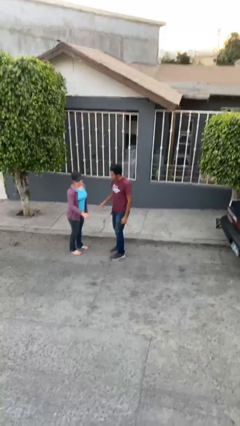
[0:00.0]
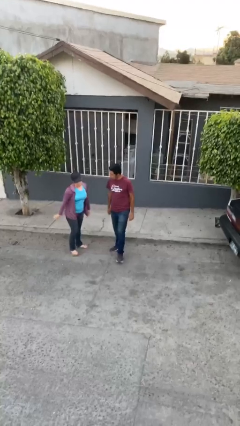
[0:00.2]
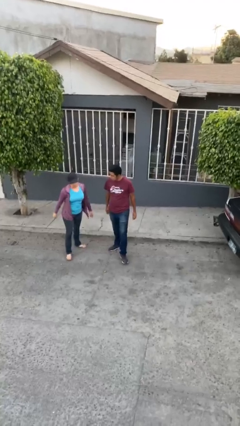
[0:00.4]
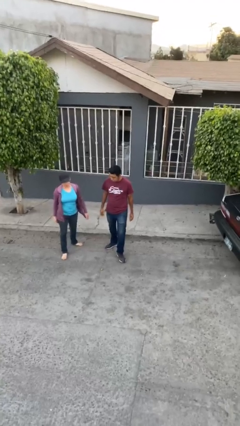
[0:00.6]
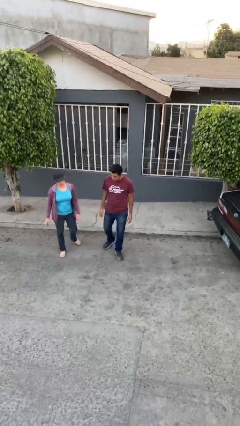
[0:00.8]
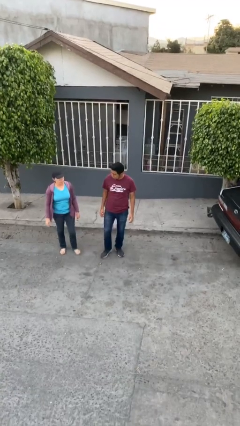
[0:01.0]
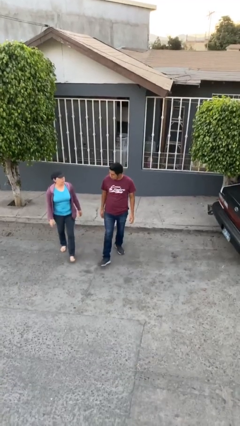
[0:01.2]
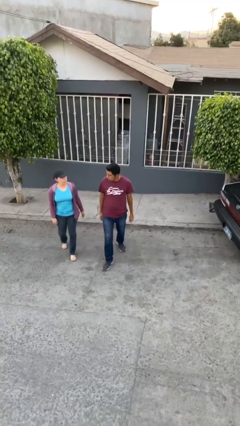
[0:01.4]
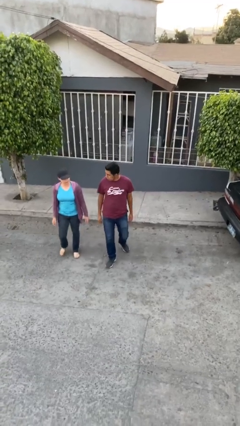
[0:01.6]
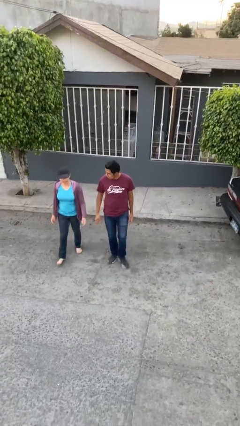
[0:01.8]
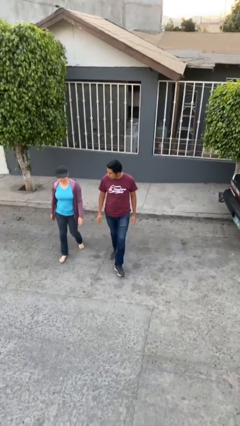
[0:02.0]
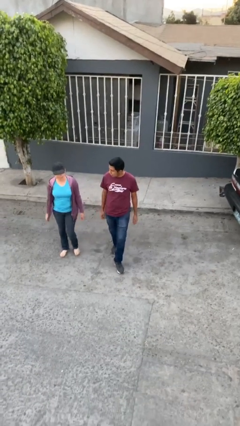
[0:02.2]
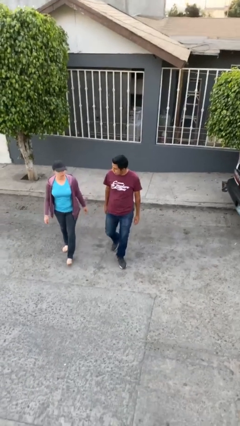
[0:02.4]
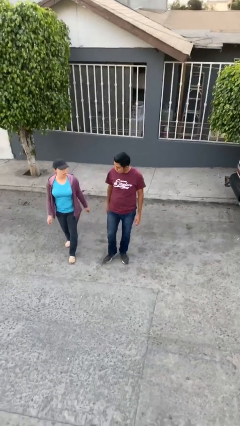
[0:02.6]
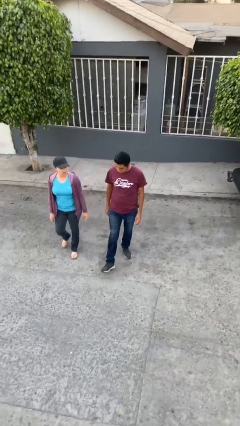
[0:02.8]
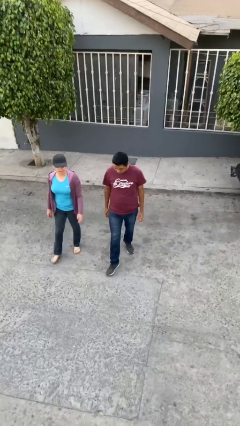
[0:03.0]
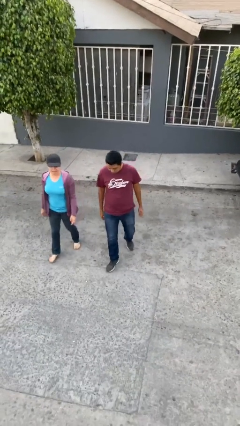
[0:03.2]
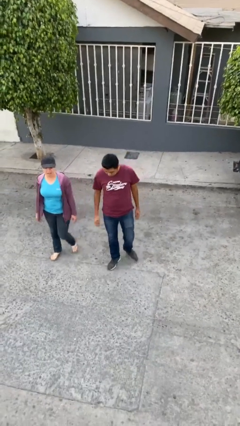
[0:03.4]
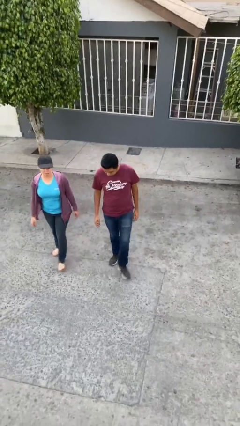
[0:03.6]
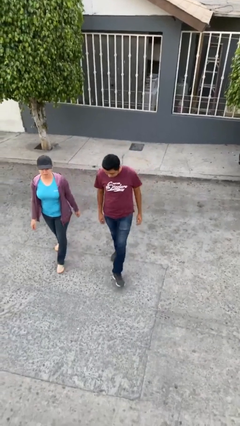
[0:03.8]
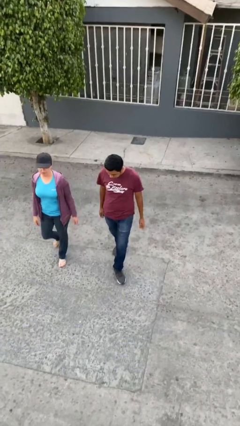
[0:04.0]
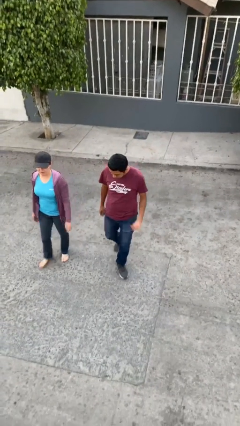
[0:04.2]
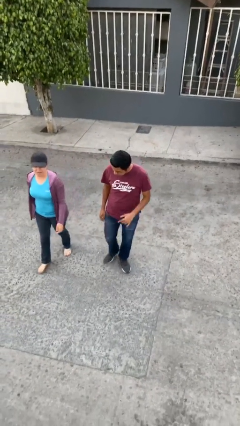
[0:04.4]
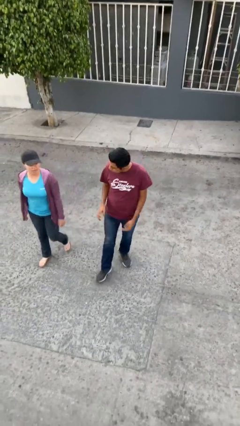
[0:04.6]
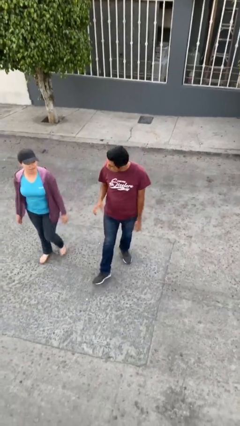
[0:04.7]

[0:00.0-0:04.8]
person talks to person

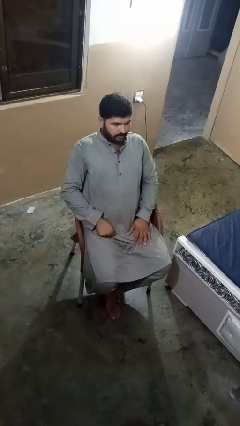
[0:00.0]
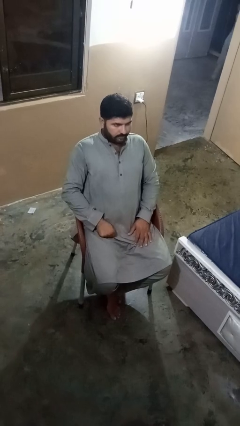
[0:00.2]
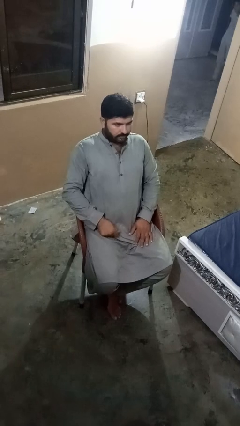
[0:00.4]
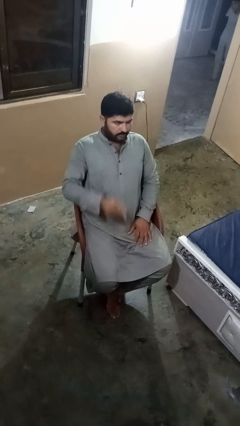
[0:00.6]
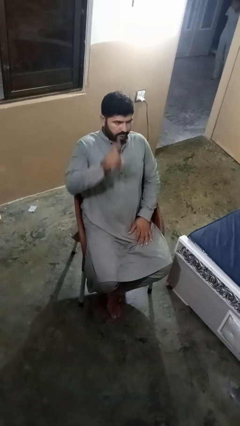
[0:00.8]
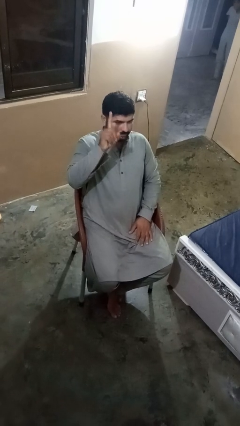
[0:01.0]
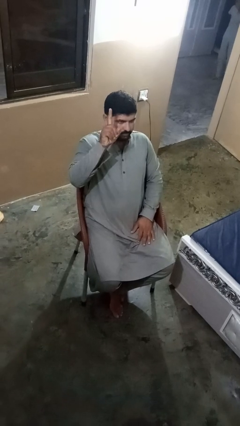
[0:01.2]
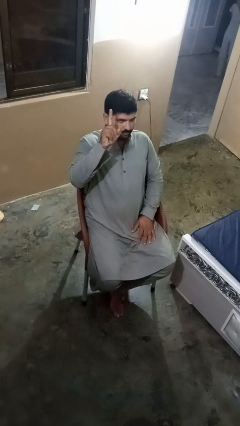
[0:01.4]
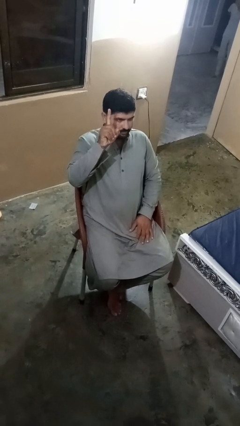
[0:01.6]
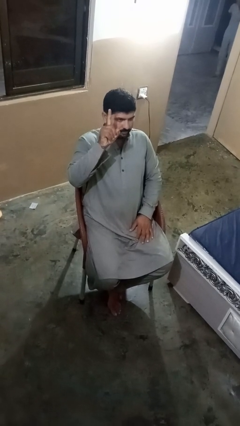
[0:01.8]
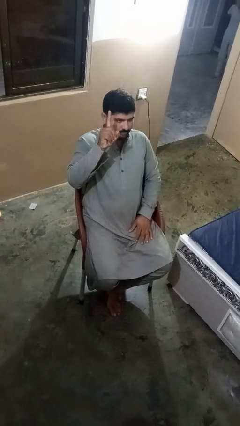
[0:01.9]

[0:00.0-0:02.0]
person gestures number one

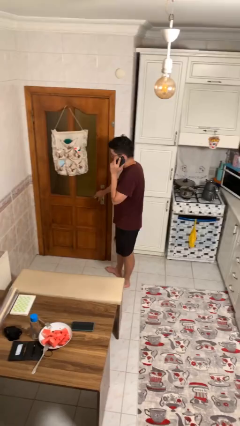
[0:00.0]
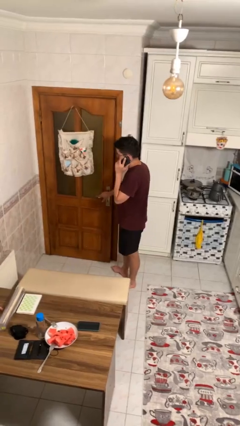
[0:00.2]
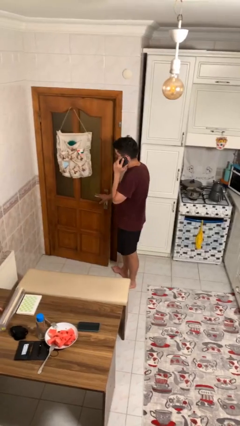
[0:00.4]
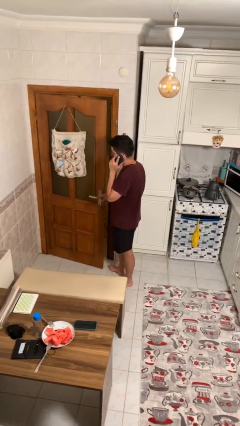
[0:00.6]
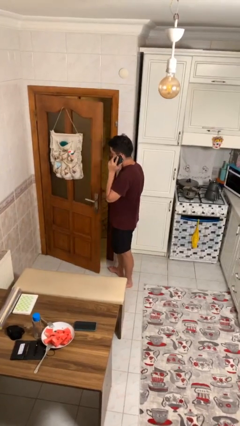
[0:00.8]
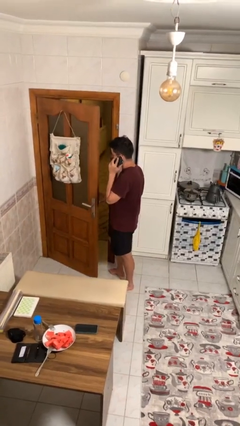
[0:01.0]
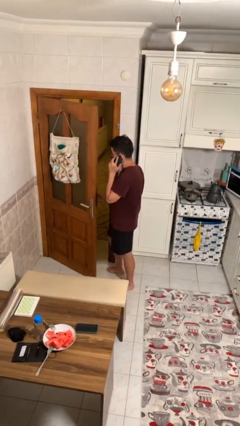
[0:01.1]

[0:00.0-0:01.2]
person opens facility door

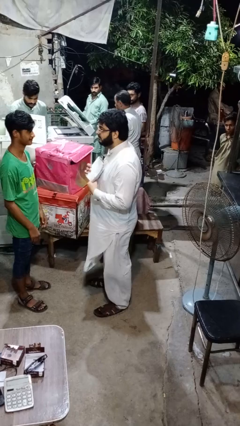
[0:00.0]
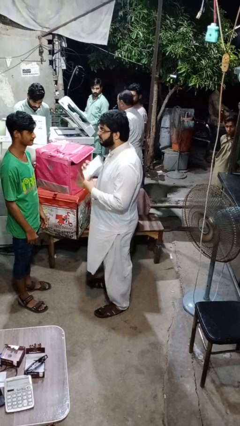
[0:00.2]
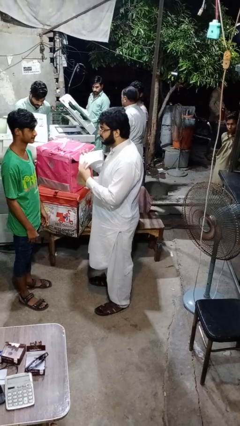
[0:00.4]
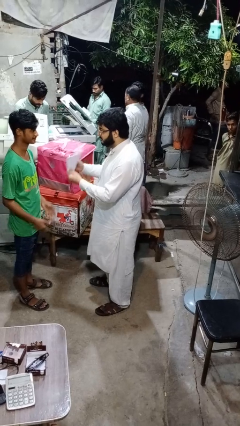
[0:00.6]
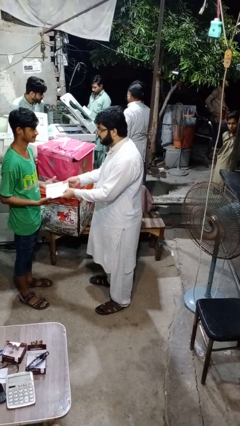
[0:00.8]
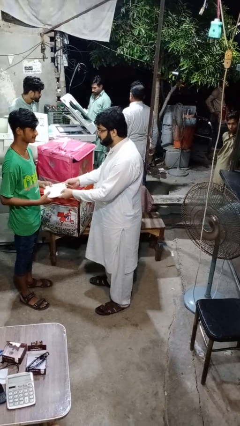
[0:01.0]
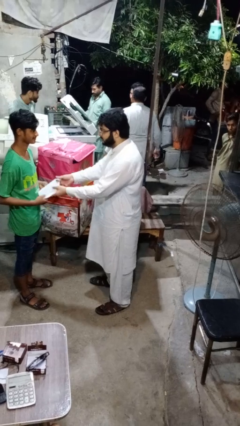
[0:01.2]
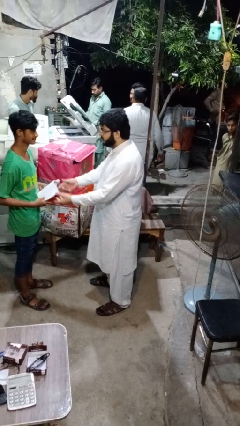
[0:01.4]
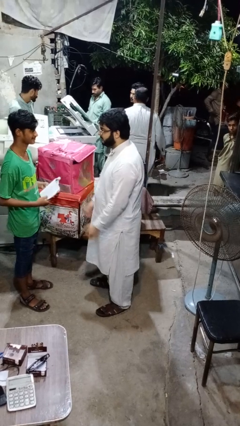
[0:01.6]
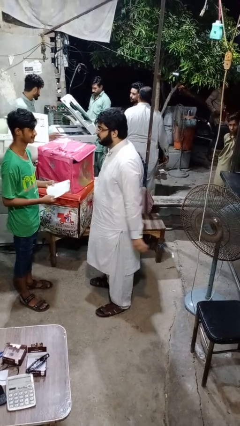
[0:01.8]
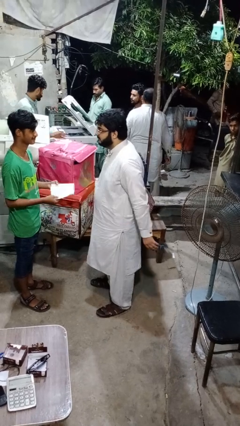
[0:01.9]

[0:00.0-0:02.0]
person transfers object to person

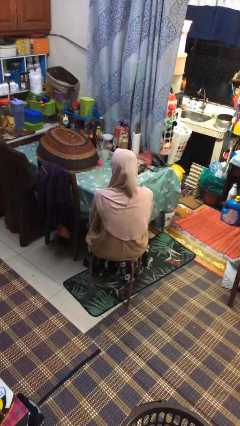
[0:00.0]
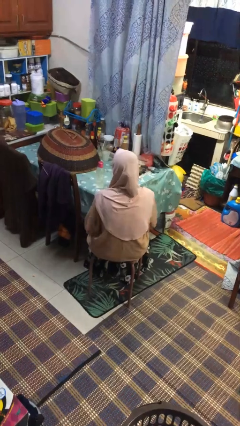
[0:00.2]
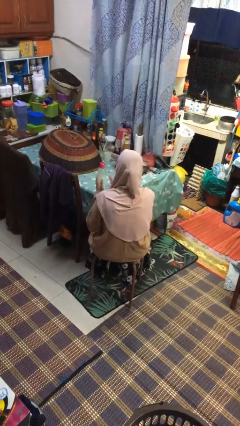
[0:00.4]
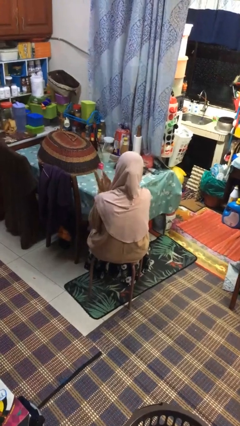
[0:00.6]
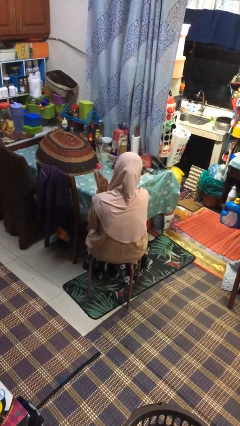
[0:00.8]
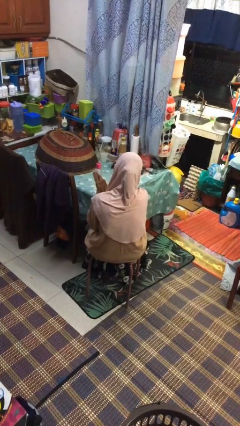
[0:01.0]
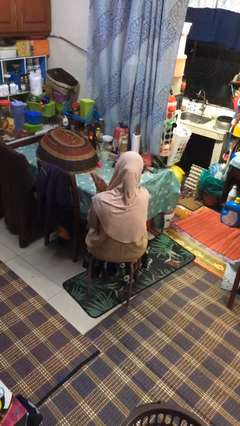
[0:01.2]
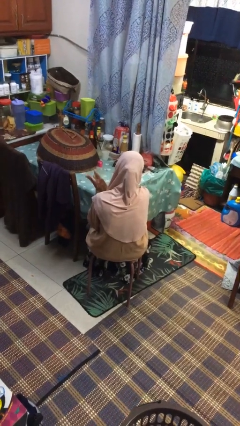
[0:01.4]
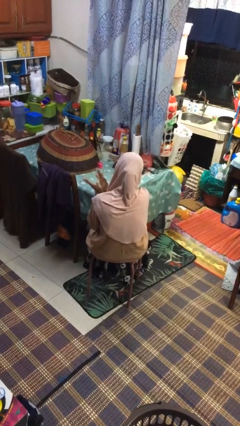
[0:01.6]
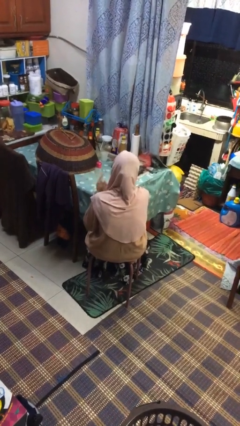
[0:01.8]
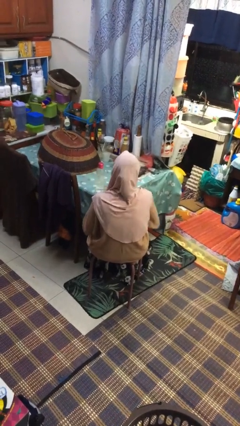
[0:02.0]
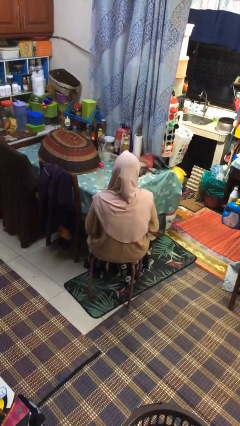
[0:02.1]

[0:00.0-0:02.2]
person claps hands

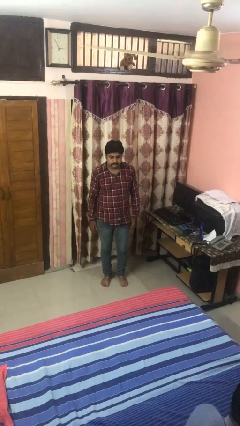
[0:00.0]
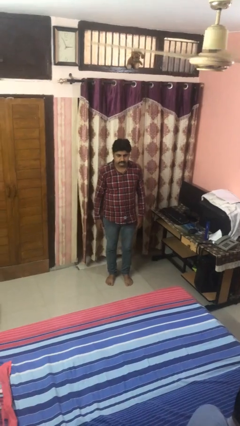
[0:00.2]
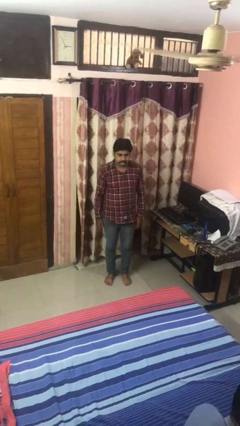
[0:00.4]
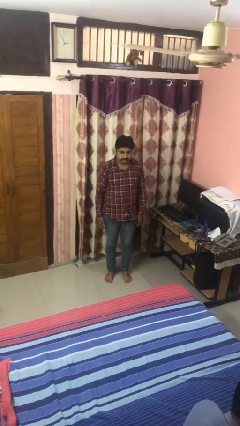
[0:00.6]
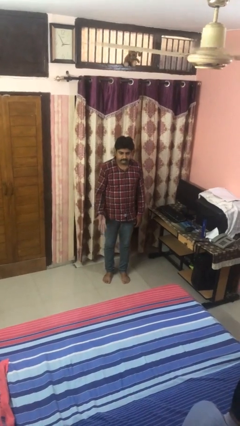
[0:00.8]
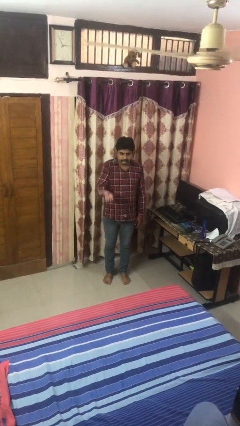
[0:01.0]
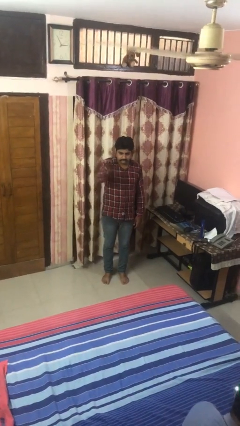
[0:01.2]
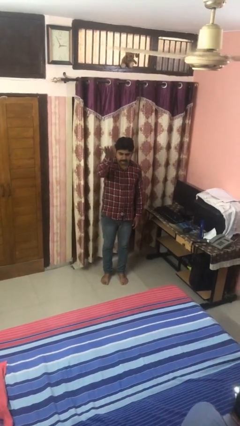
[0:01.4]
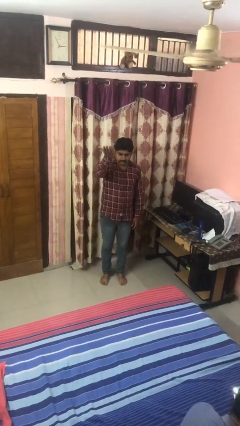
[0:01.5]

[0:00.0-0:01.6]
person gestures swipe up

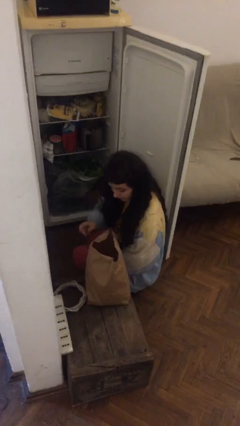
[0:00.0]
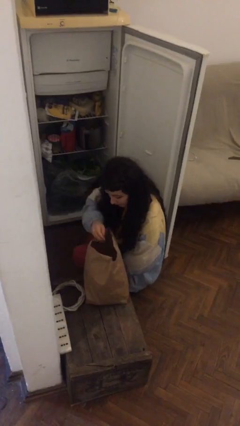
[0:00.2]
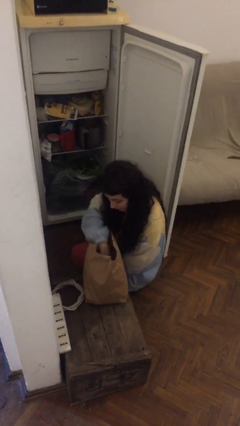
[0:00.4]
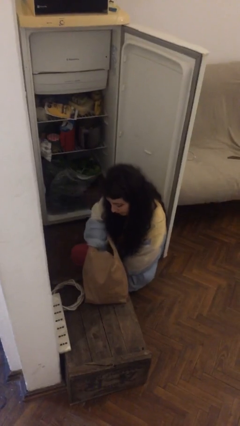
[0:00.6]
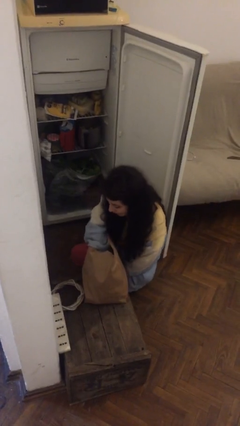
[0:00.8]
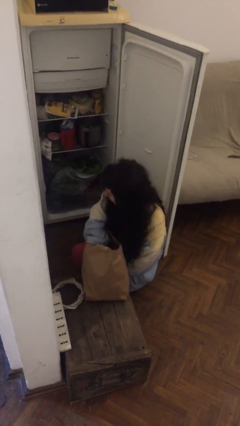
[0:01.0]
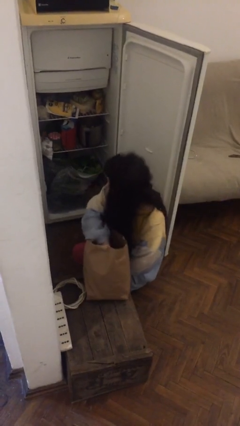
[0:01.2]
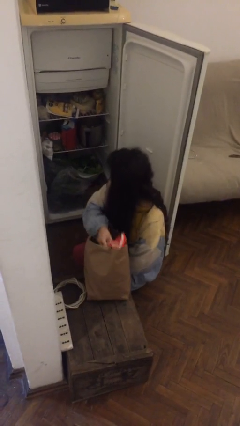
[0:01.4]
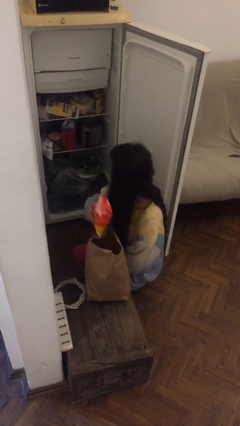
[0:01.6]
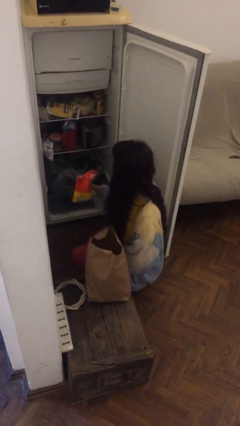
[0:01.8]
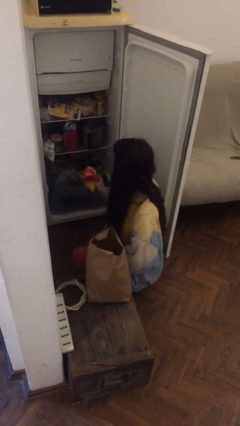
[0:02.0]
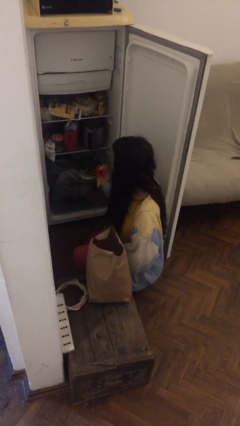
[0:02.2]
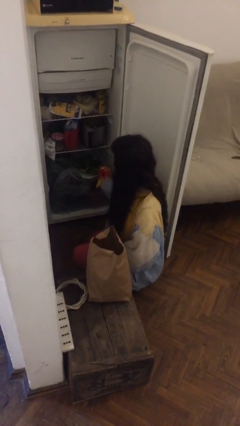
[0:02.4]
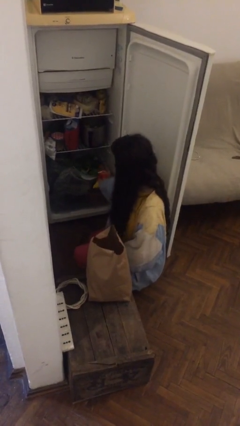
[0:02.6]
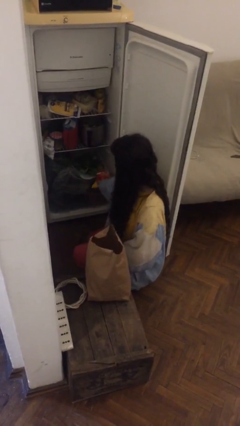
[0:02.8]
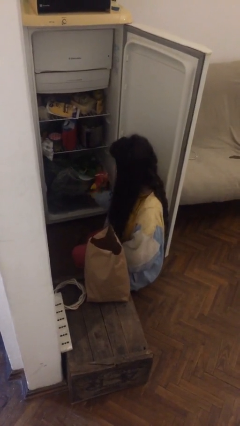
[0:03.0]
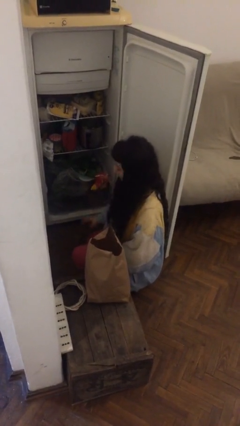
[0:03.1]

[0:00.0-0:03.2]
person loads groceries into refrigerator
